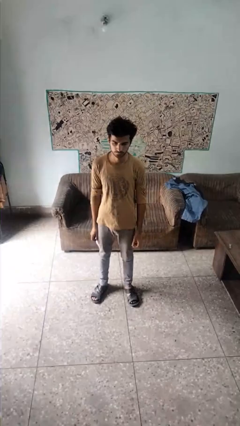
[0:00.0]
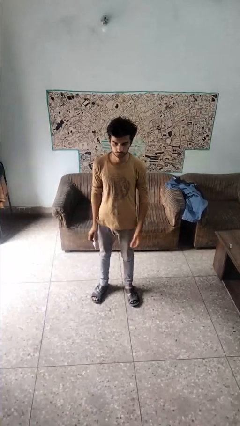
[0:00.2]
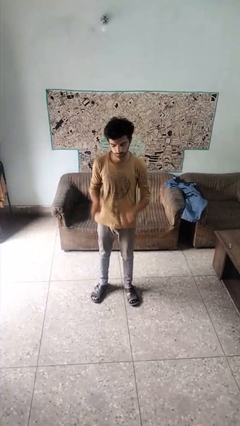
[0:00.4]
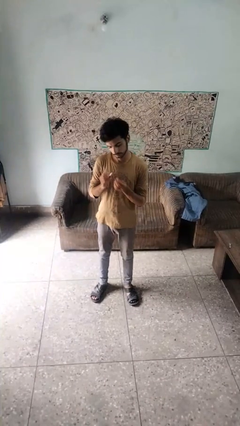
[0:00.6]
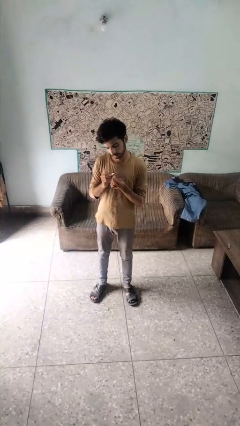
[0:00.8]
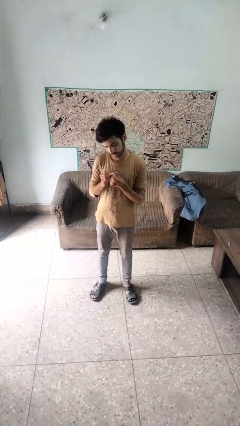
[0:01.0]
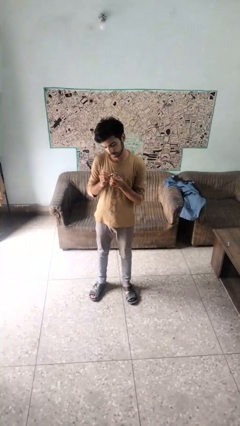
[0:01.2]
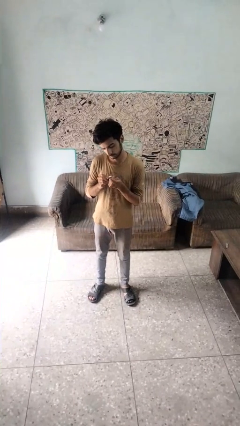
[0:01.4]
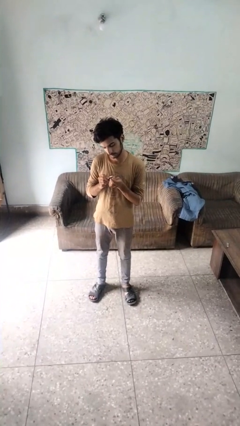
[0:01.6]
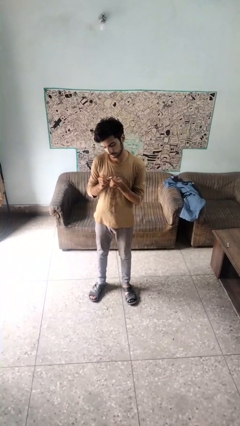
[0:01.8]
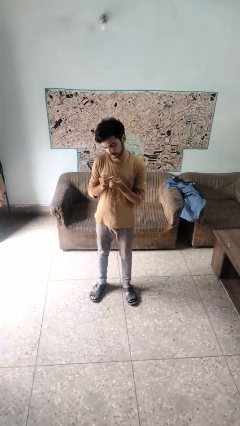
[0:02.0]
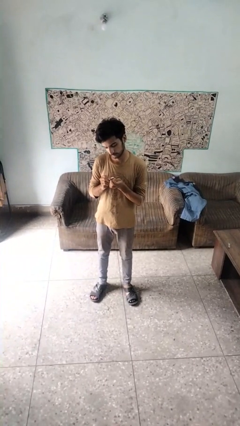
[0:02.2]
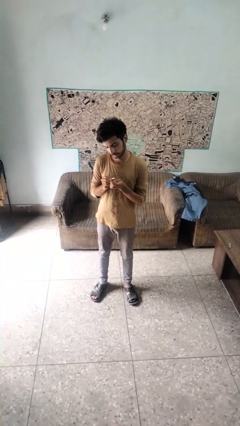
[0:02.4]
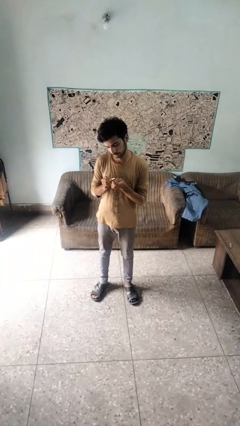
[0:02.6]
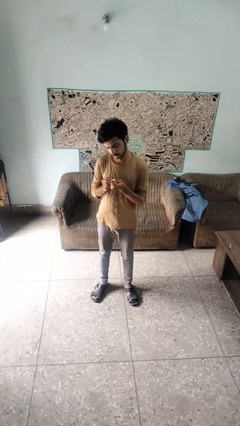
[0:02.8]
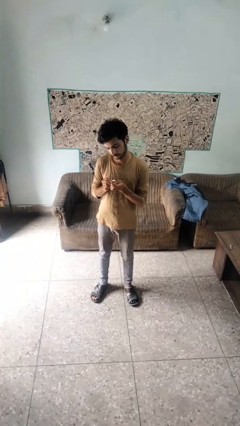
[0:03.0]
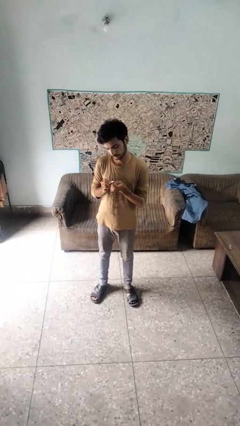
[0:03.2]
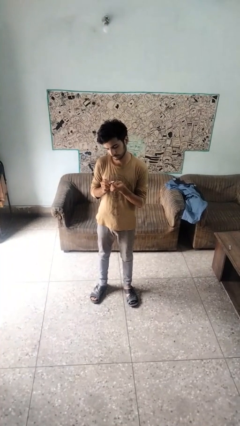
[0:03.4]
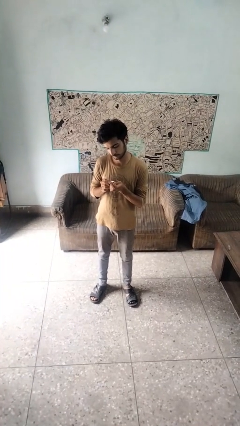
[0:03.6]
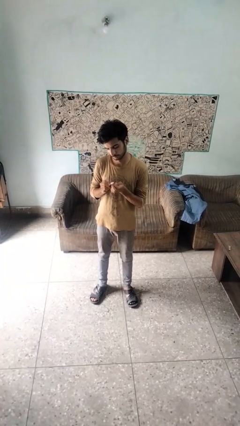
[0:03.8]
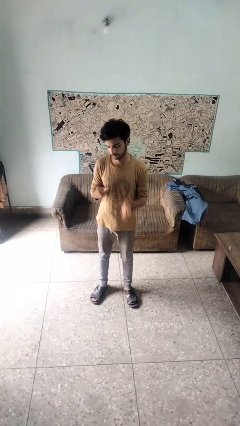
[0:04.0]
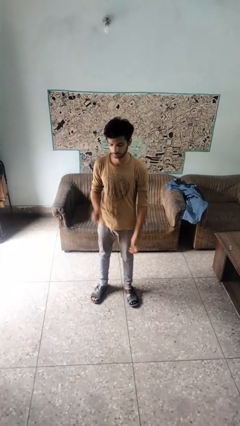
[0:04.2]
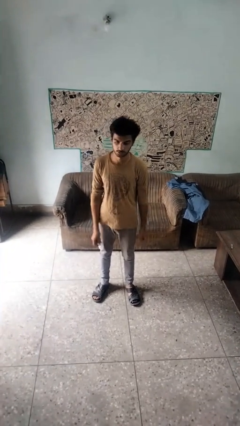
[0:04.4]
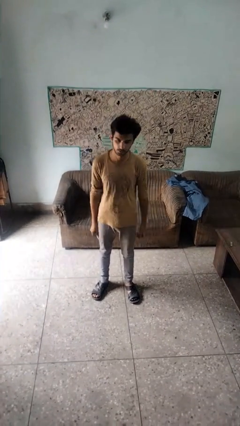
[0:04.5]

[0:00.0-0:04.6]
person files fingernails

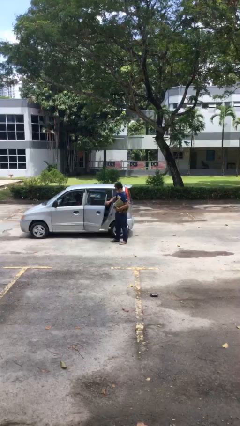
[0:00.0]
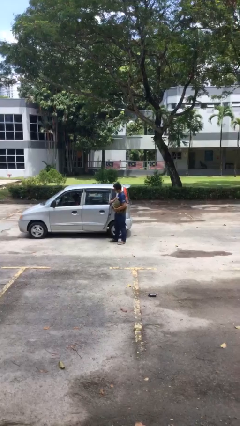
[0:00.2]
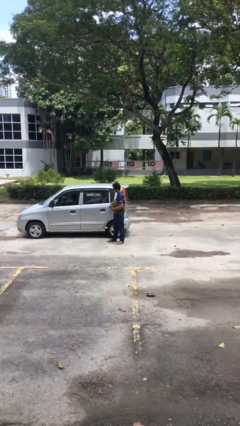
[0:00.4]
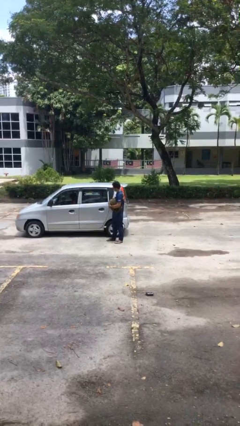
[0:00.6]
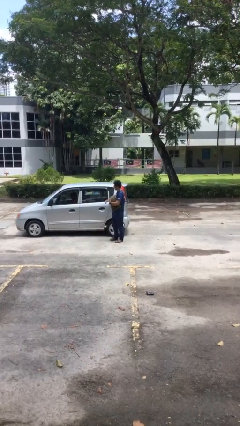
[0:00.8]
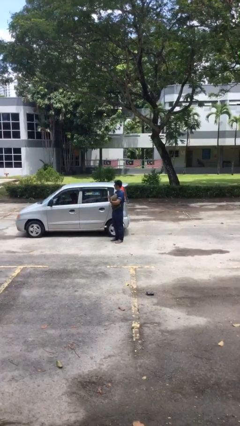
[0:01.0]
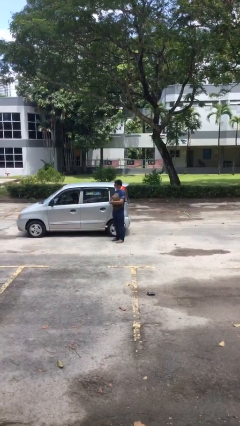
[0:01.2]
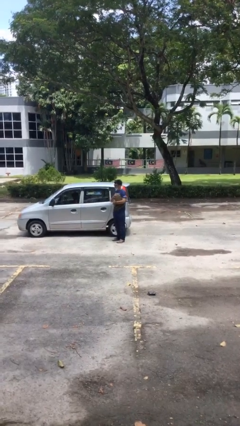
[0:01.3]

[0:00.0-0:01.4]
person closes car door

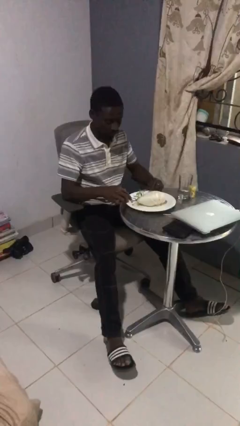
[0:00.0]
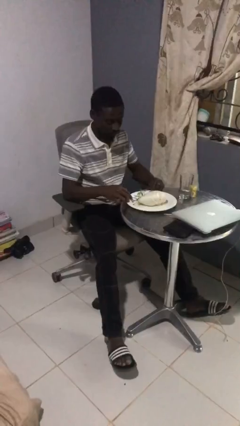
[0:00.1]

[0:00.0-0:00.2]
person eats with utensil

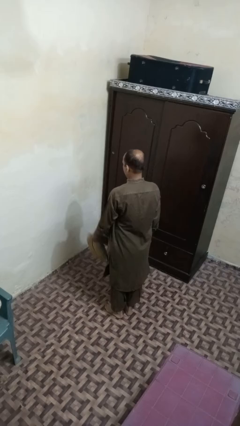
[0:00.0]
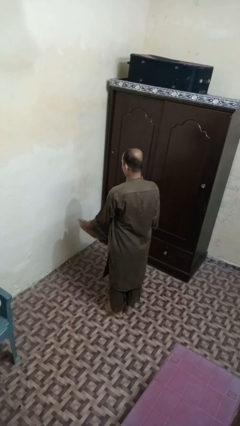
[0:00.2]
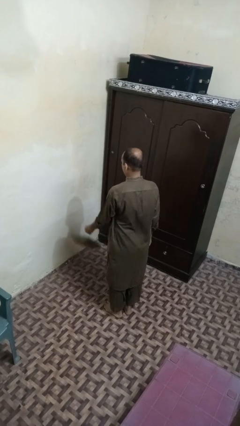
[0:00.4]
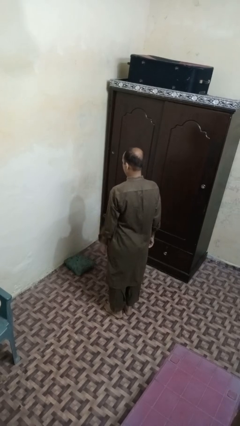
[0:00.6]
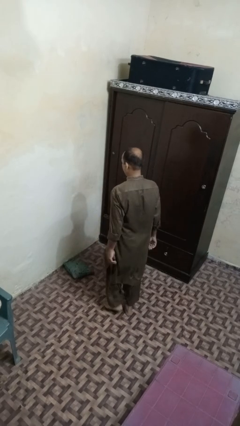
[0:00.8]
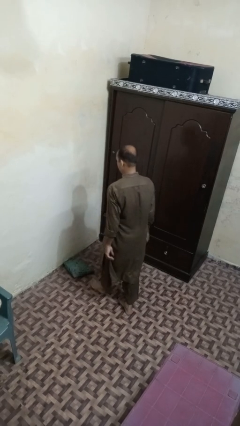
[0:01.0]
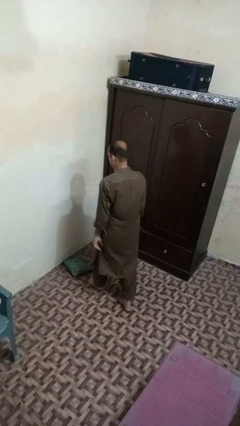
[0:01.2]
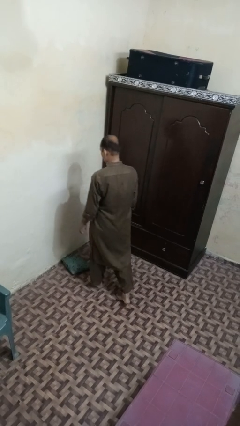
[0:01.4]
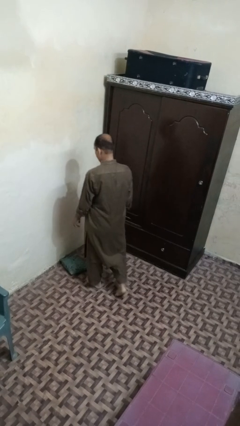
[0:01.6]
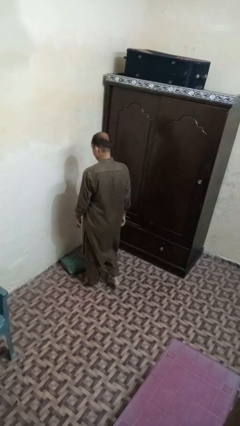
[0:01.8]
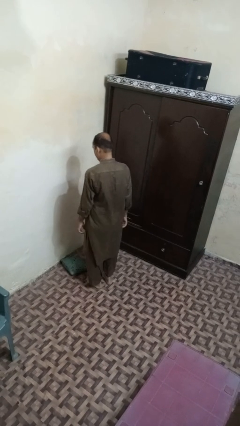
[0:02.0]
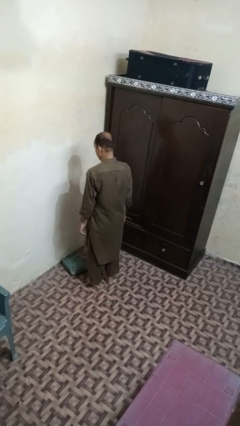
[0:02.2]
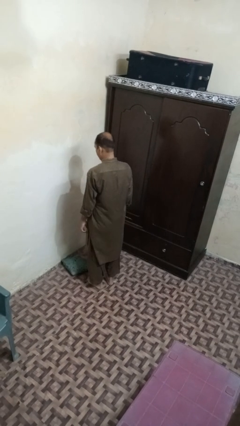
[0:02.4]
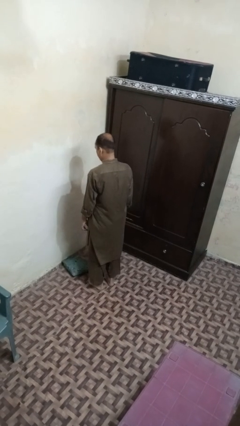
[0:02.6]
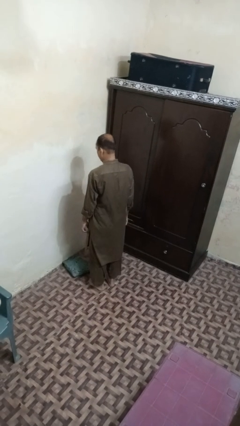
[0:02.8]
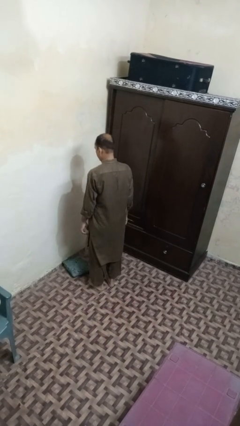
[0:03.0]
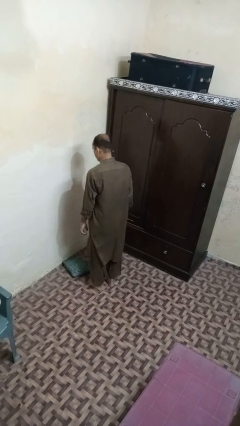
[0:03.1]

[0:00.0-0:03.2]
person throws object to ground

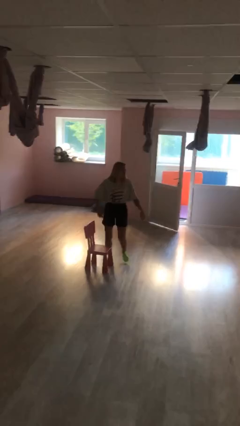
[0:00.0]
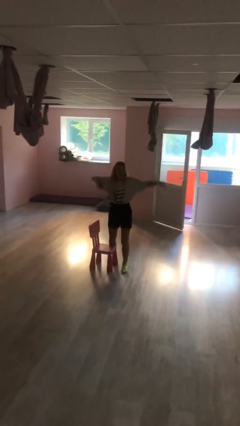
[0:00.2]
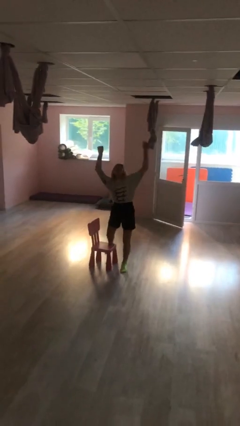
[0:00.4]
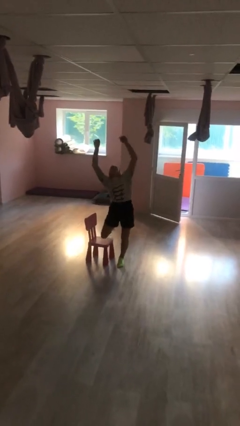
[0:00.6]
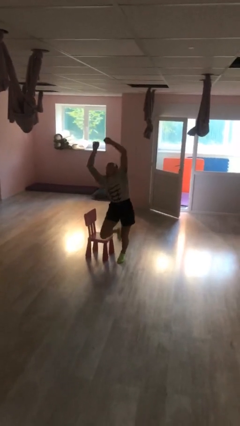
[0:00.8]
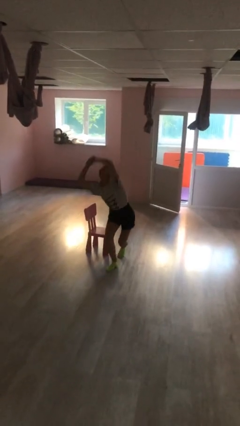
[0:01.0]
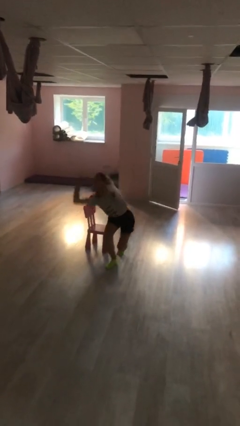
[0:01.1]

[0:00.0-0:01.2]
person trips on object on floor

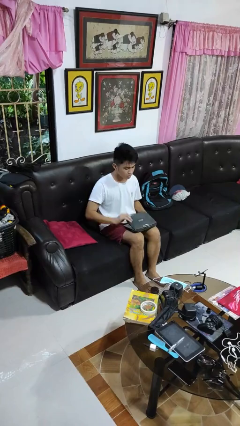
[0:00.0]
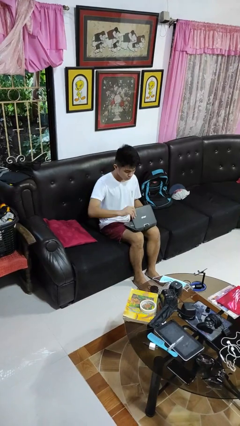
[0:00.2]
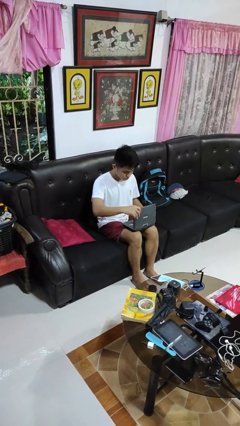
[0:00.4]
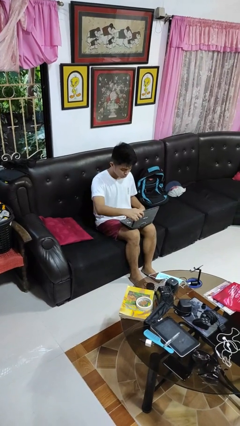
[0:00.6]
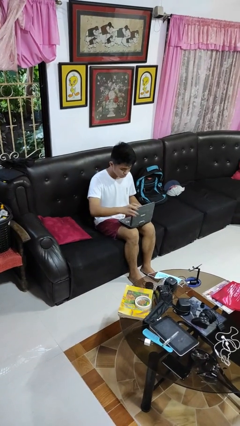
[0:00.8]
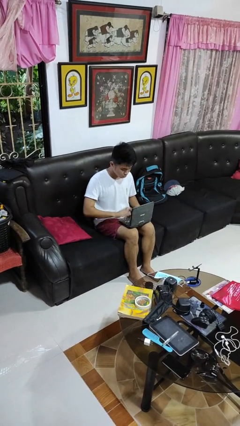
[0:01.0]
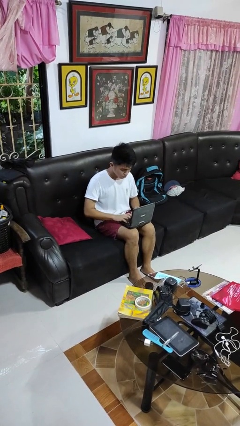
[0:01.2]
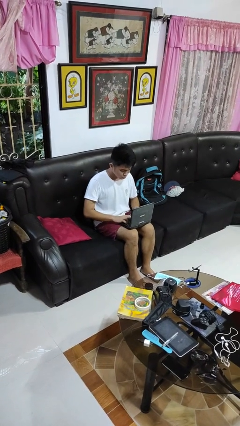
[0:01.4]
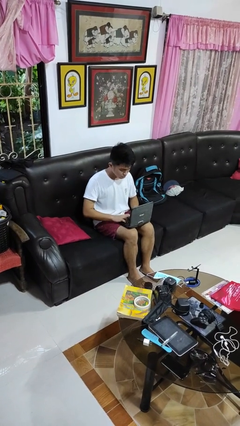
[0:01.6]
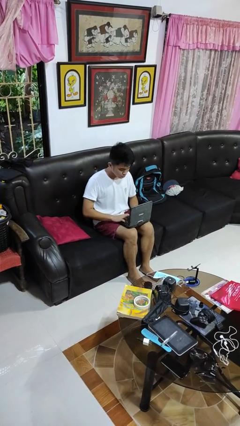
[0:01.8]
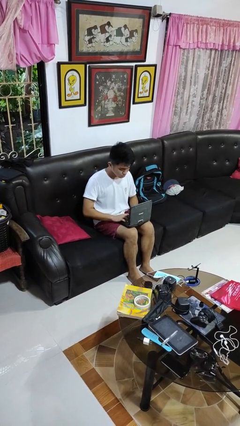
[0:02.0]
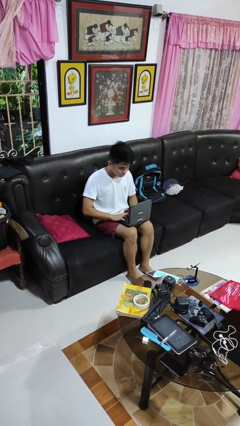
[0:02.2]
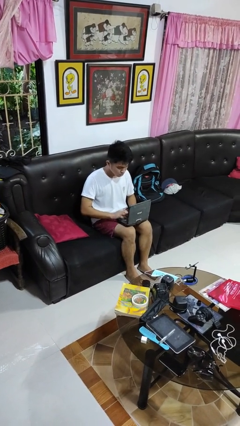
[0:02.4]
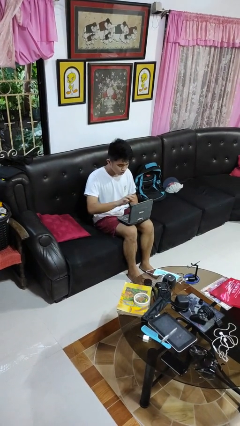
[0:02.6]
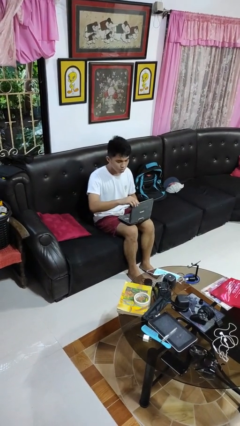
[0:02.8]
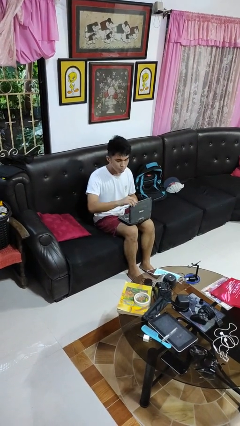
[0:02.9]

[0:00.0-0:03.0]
person opens laptop

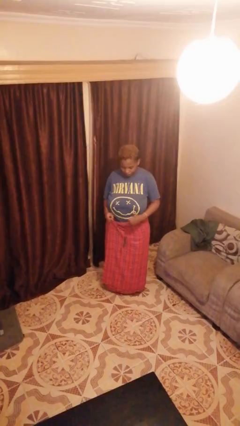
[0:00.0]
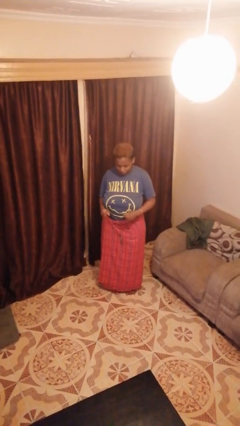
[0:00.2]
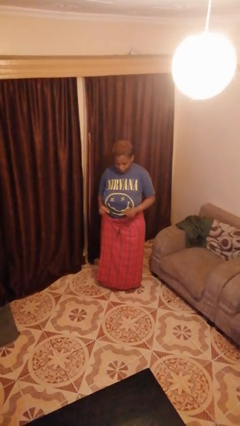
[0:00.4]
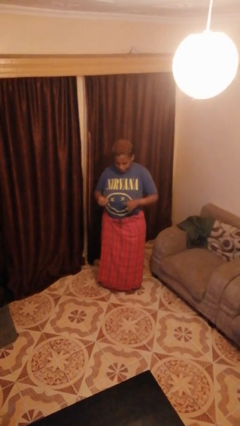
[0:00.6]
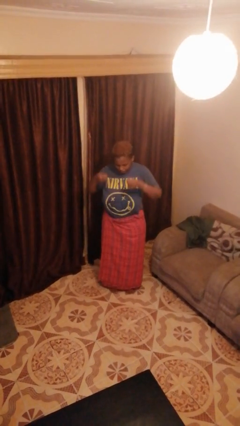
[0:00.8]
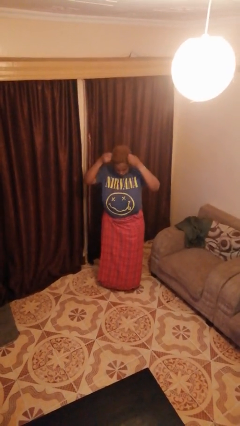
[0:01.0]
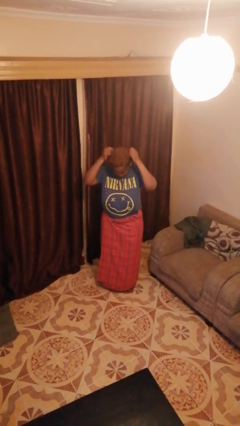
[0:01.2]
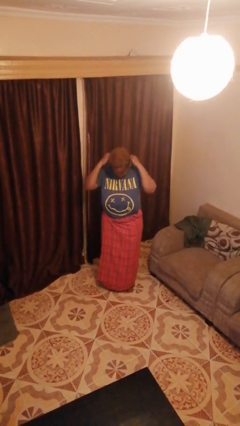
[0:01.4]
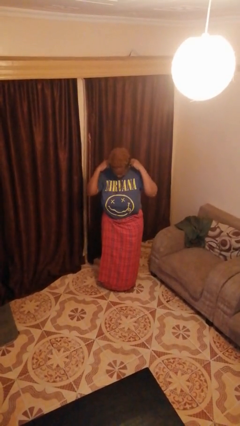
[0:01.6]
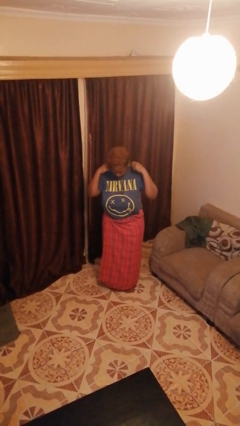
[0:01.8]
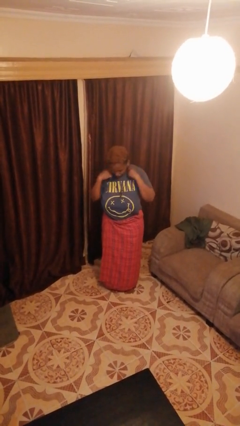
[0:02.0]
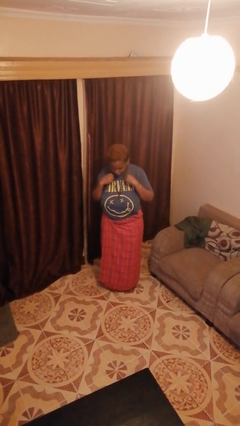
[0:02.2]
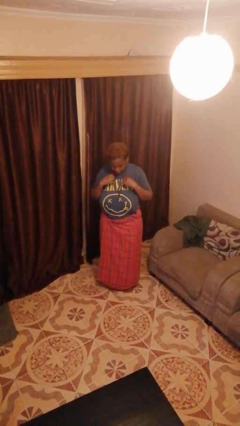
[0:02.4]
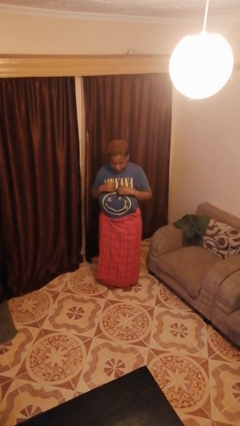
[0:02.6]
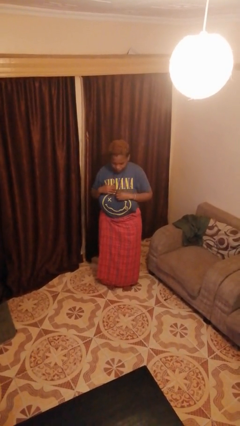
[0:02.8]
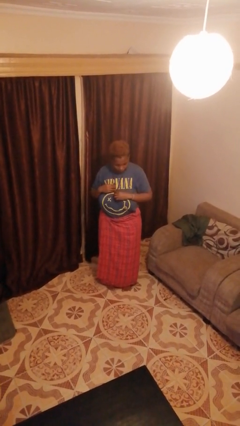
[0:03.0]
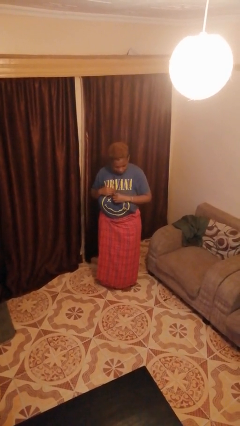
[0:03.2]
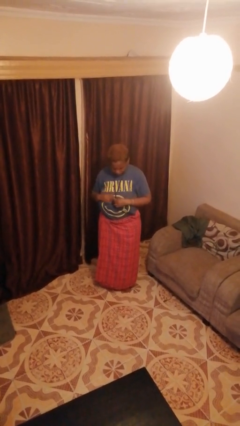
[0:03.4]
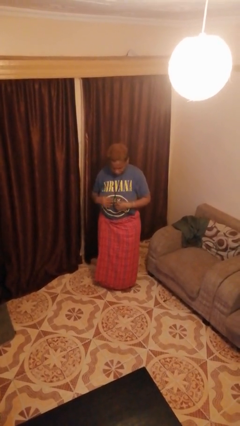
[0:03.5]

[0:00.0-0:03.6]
person puts on necklace
